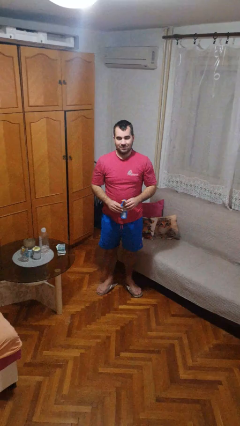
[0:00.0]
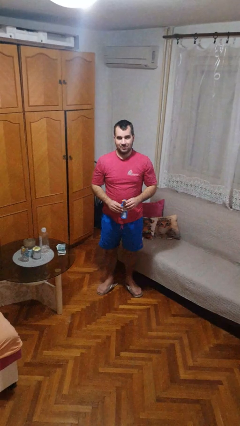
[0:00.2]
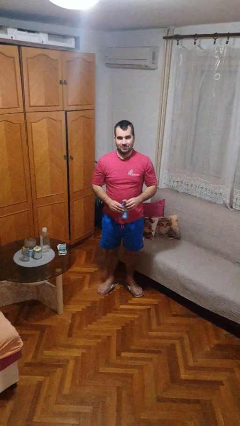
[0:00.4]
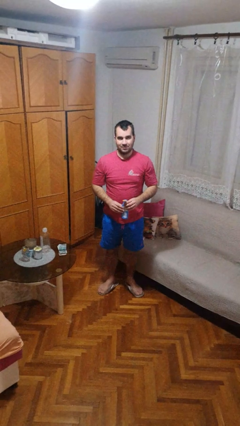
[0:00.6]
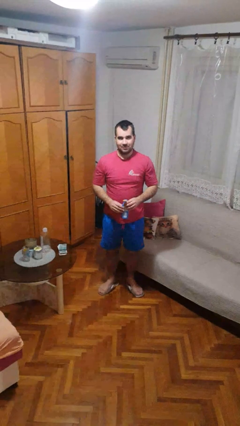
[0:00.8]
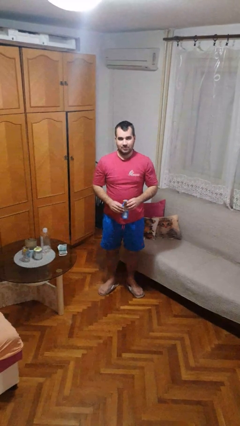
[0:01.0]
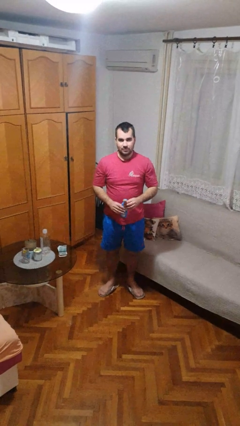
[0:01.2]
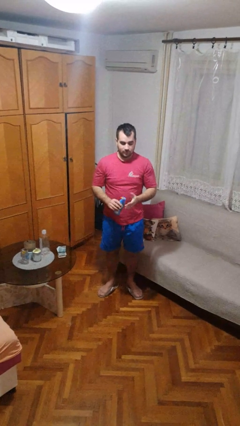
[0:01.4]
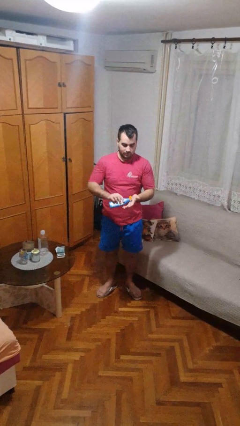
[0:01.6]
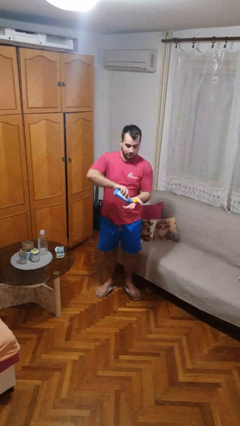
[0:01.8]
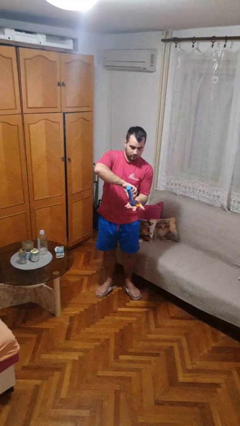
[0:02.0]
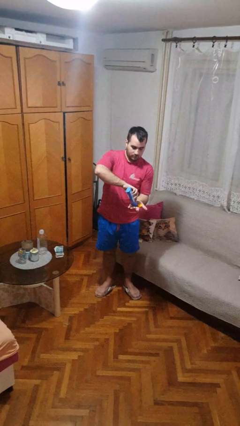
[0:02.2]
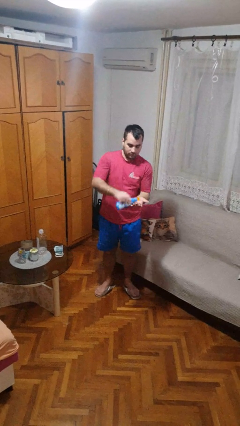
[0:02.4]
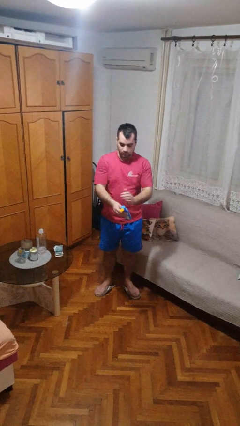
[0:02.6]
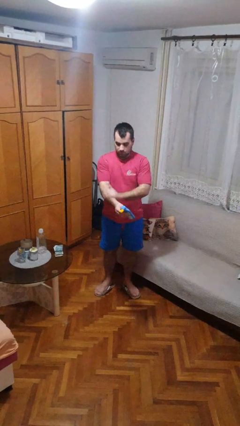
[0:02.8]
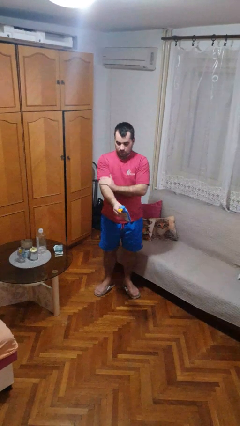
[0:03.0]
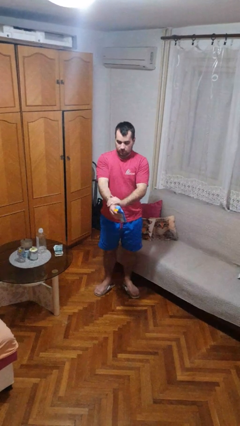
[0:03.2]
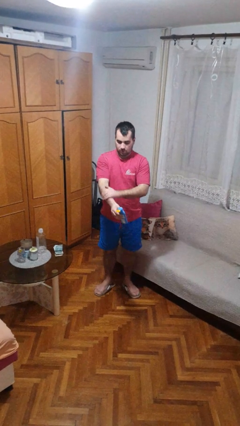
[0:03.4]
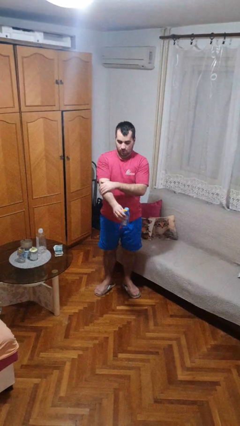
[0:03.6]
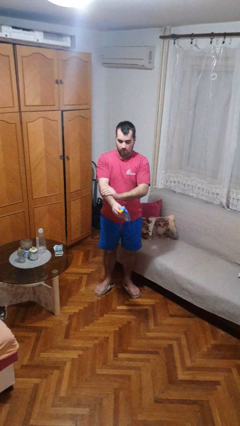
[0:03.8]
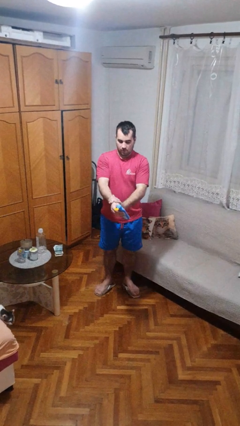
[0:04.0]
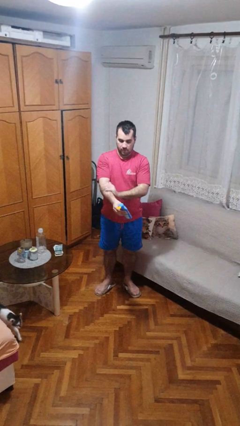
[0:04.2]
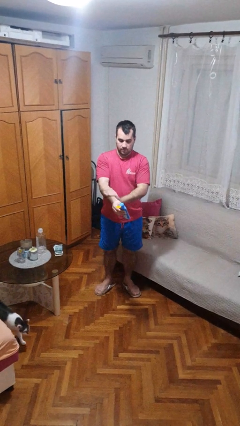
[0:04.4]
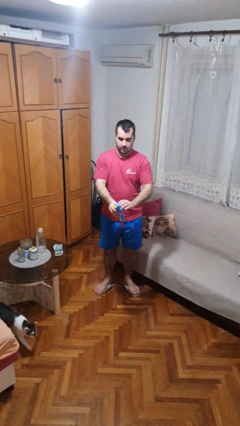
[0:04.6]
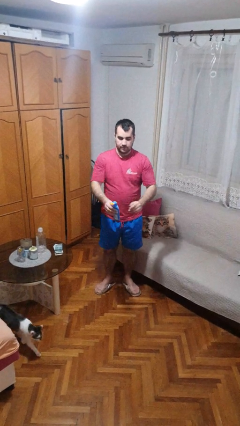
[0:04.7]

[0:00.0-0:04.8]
person applies sunscreen

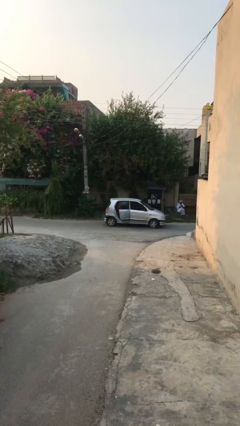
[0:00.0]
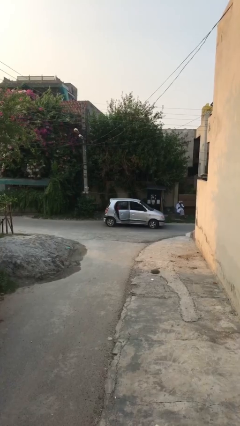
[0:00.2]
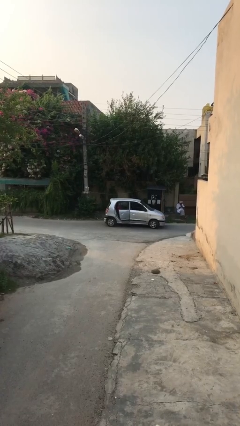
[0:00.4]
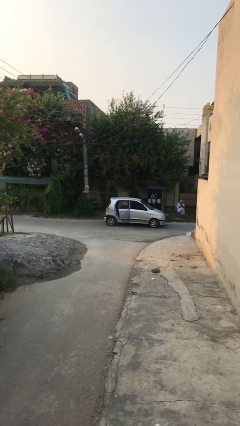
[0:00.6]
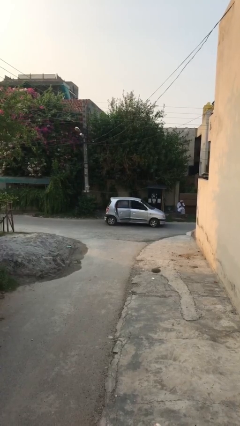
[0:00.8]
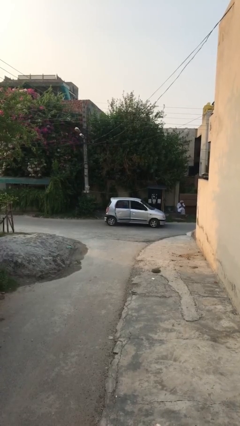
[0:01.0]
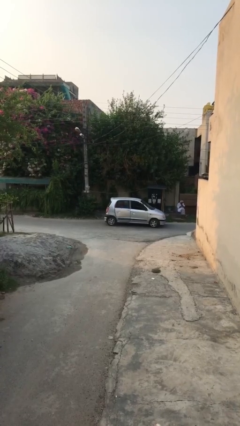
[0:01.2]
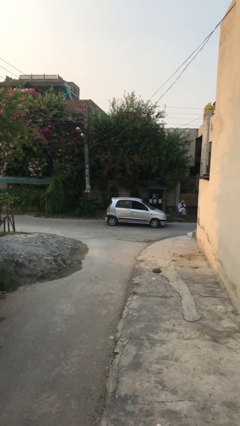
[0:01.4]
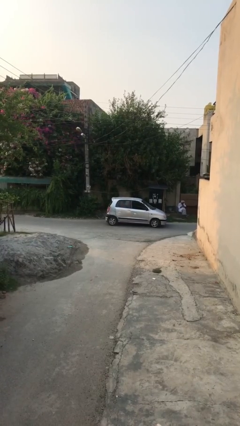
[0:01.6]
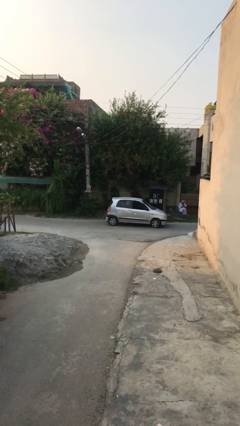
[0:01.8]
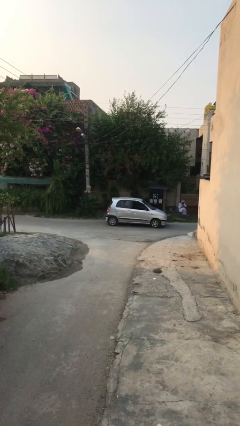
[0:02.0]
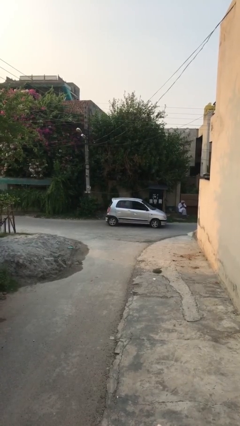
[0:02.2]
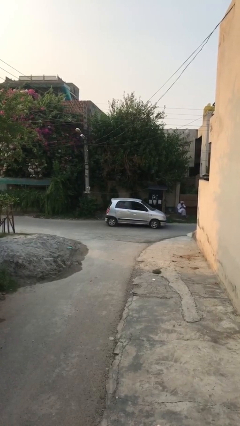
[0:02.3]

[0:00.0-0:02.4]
person closes car door

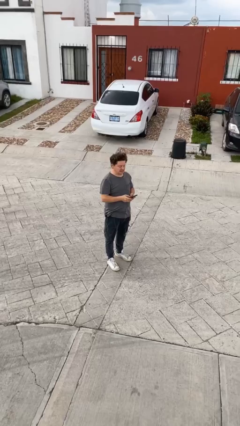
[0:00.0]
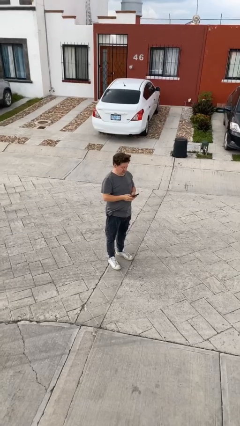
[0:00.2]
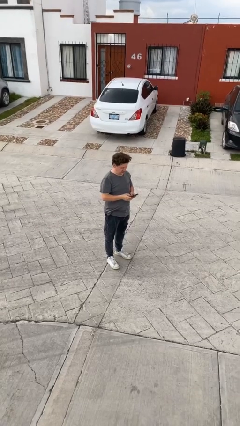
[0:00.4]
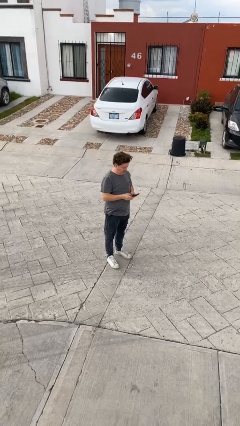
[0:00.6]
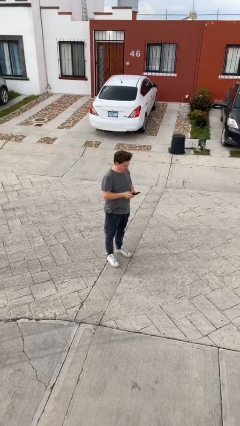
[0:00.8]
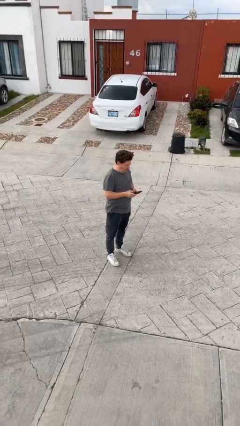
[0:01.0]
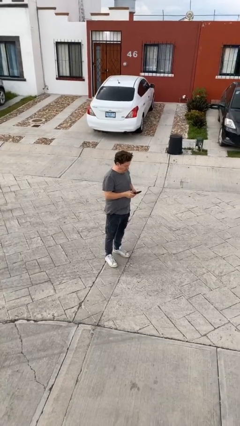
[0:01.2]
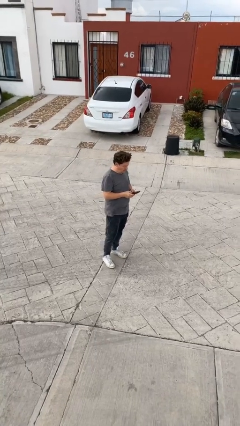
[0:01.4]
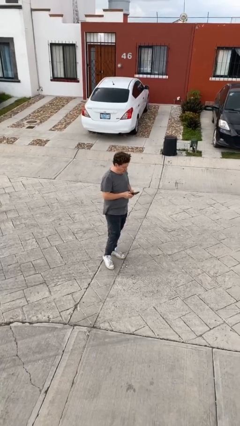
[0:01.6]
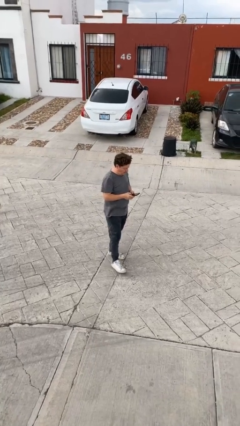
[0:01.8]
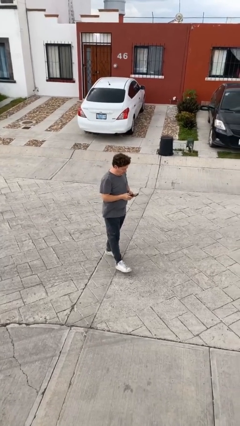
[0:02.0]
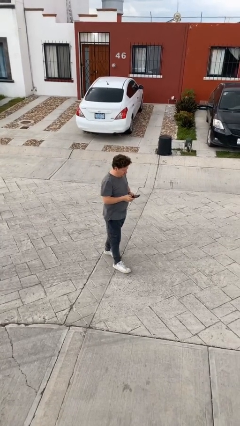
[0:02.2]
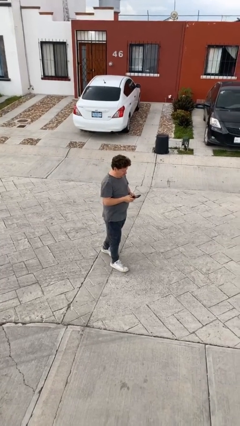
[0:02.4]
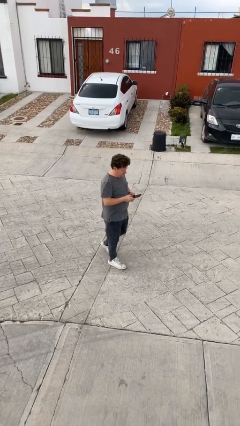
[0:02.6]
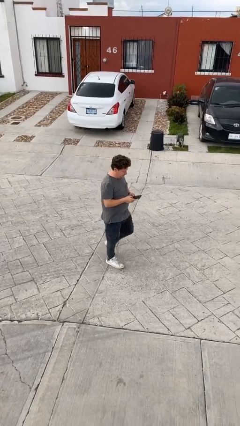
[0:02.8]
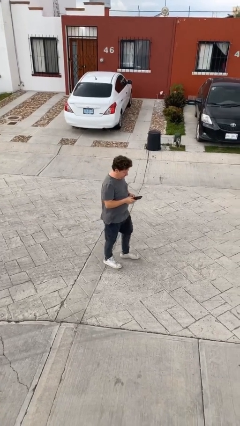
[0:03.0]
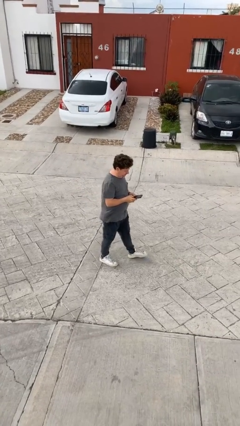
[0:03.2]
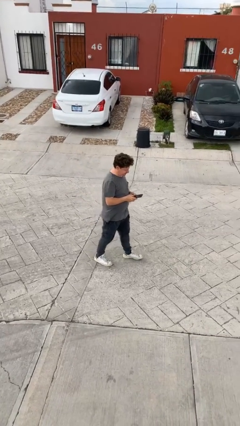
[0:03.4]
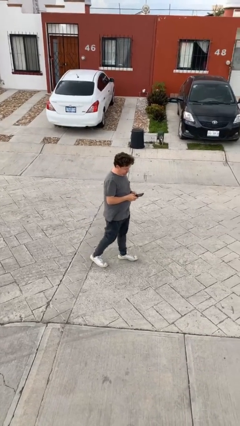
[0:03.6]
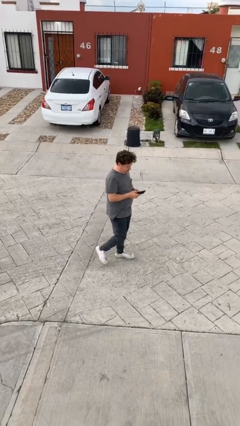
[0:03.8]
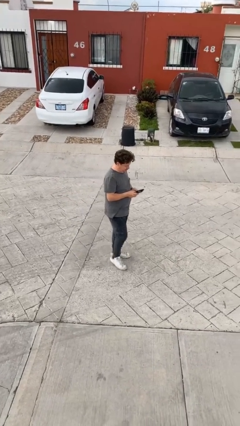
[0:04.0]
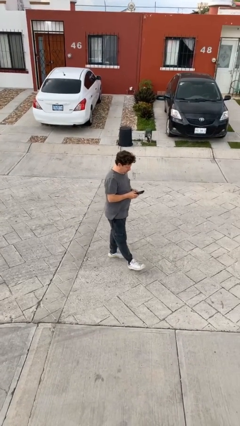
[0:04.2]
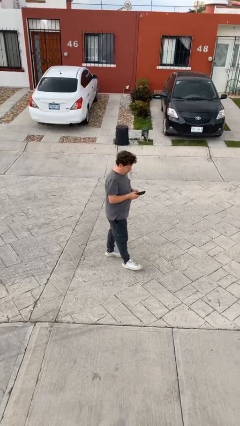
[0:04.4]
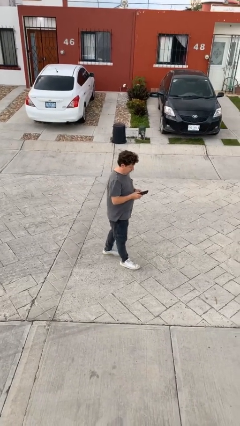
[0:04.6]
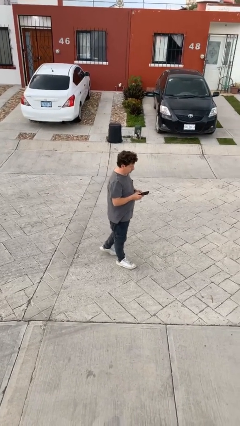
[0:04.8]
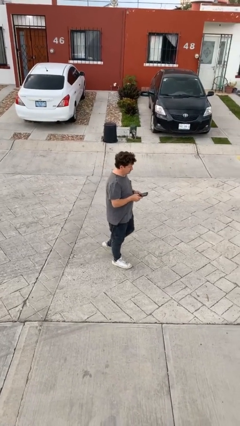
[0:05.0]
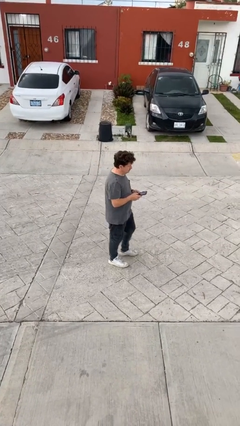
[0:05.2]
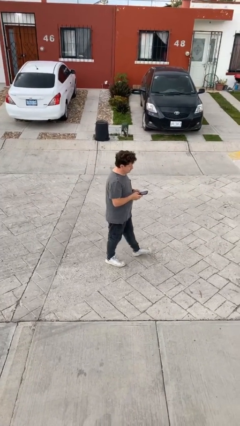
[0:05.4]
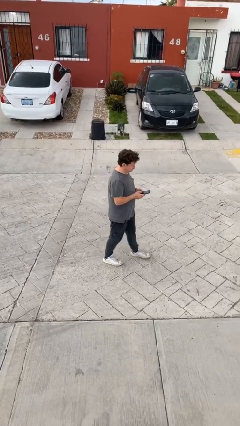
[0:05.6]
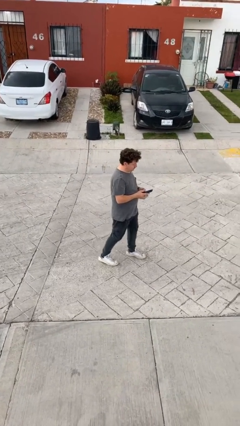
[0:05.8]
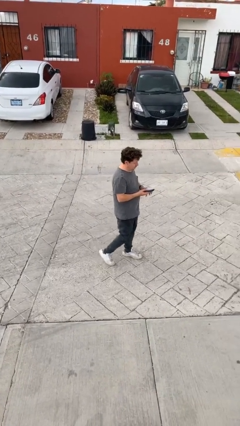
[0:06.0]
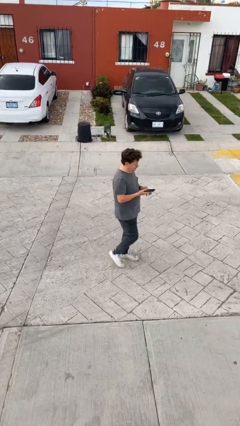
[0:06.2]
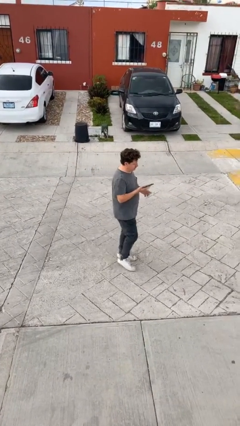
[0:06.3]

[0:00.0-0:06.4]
person texts on phone

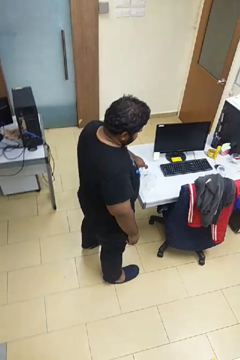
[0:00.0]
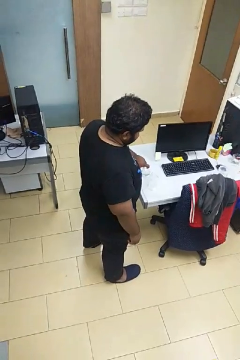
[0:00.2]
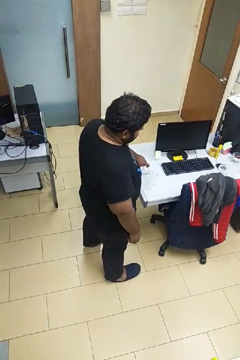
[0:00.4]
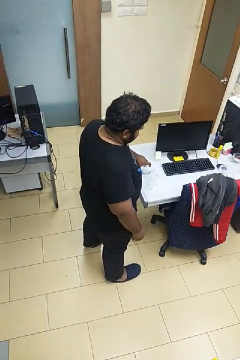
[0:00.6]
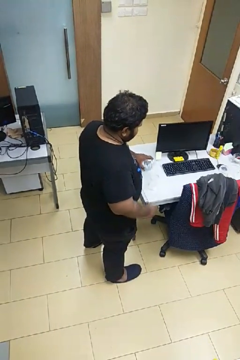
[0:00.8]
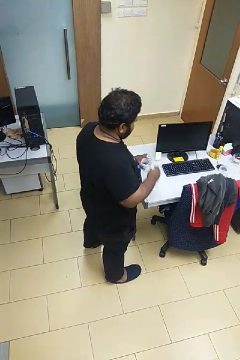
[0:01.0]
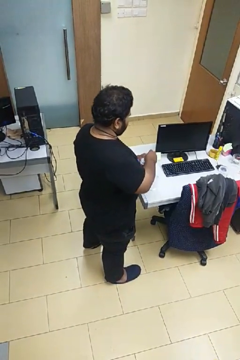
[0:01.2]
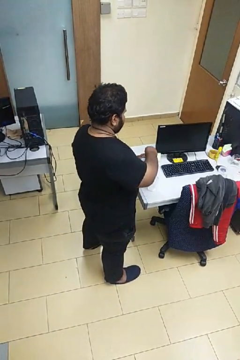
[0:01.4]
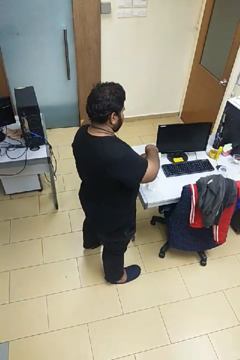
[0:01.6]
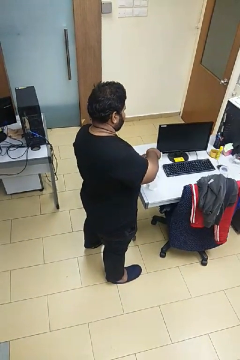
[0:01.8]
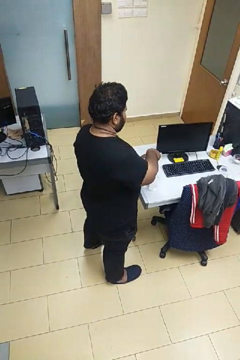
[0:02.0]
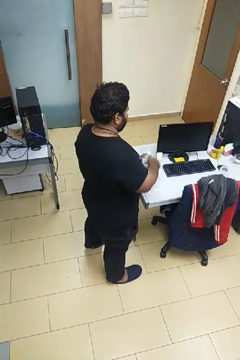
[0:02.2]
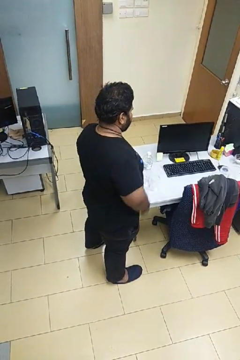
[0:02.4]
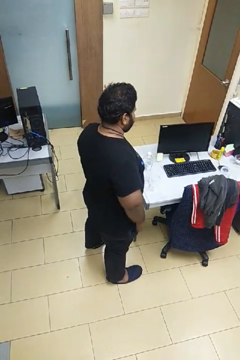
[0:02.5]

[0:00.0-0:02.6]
person screws lid to bottle

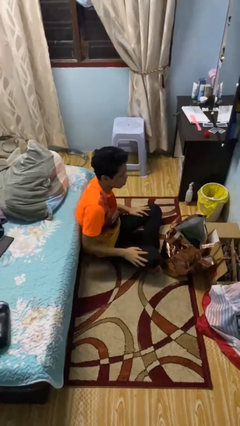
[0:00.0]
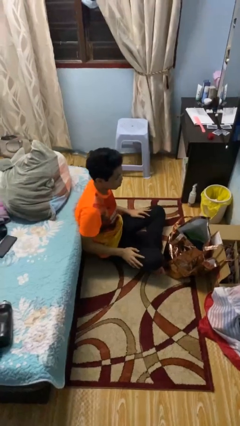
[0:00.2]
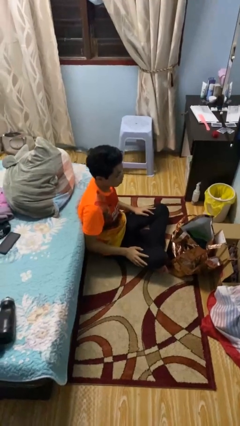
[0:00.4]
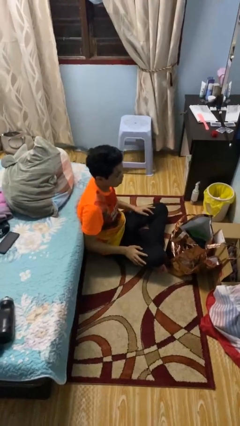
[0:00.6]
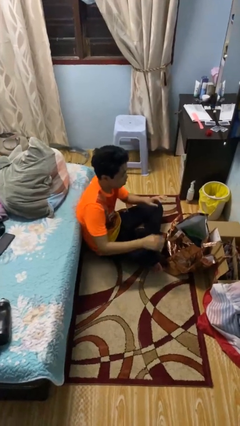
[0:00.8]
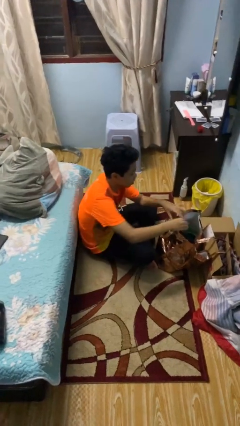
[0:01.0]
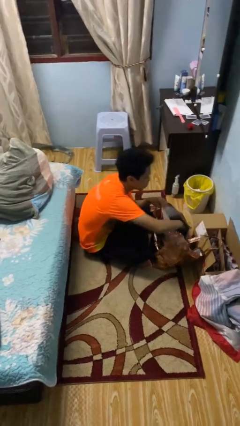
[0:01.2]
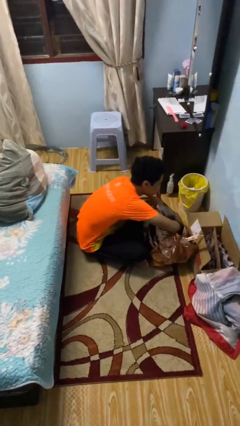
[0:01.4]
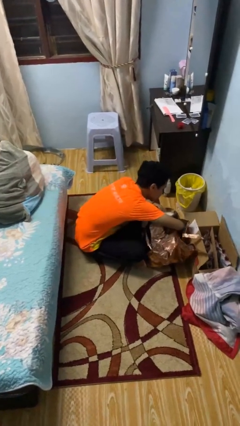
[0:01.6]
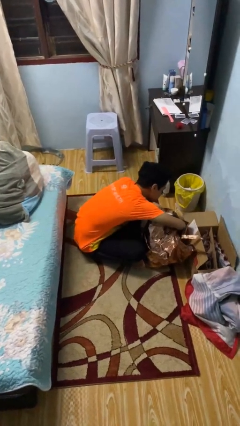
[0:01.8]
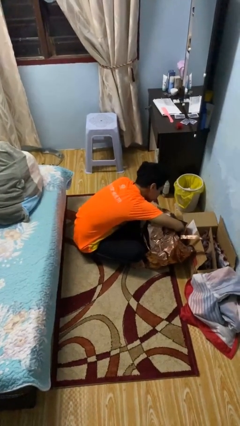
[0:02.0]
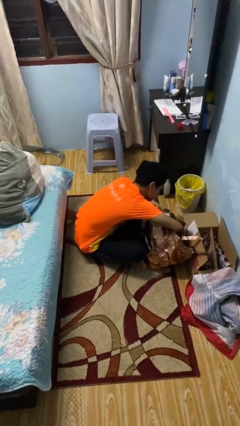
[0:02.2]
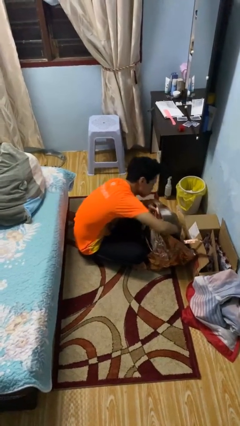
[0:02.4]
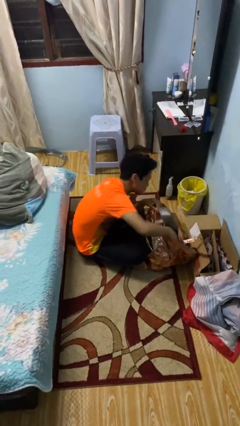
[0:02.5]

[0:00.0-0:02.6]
person searches in bag
